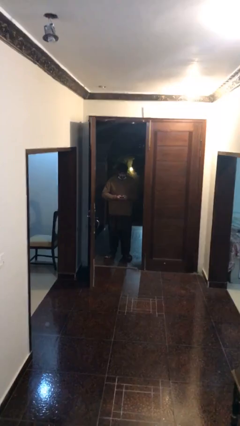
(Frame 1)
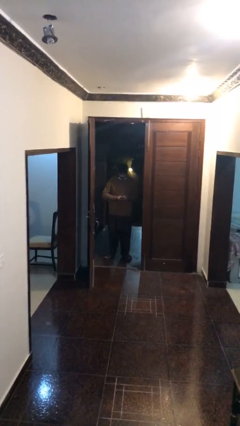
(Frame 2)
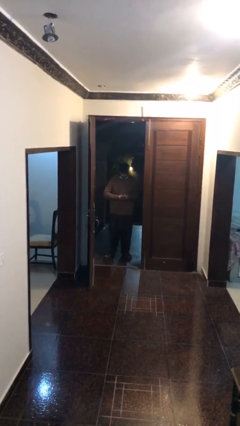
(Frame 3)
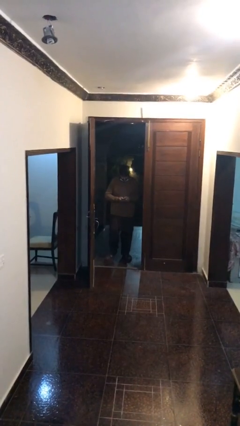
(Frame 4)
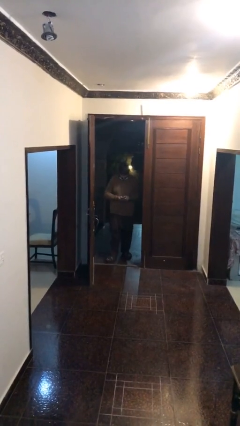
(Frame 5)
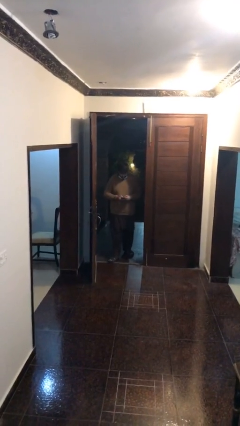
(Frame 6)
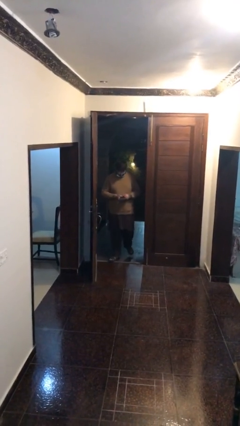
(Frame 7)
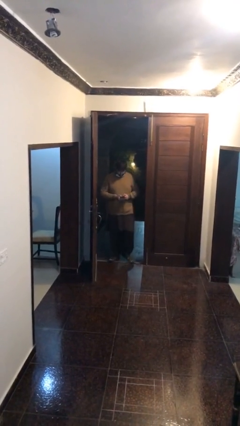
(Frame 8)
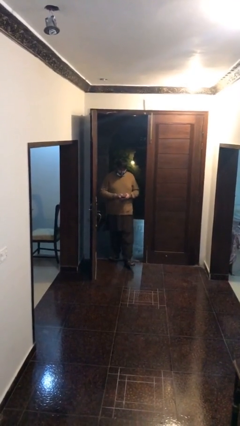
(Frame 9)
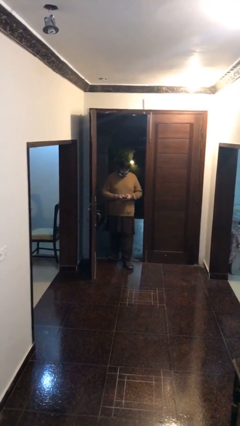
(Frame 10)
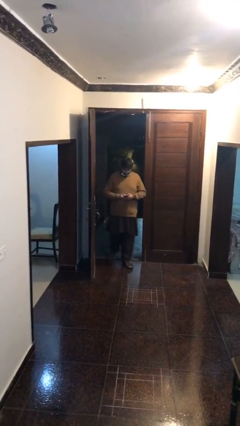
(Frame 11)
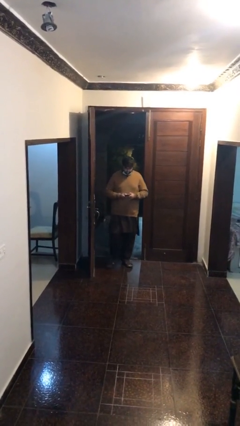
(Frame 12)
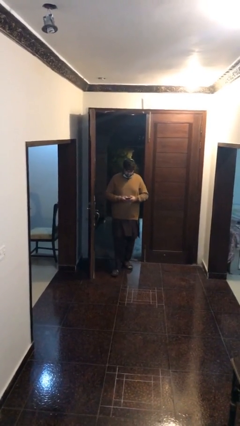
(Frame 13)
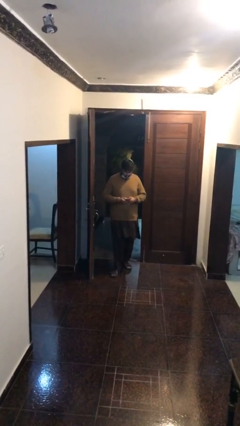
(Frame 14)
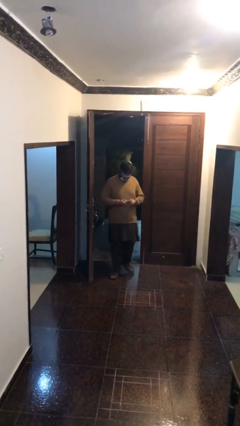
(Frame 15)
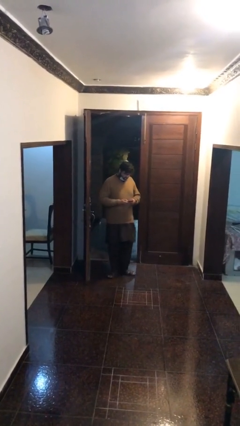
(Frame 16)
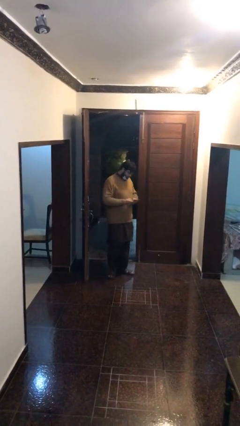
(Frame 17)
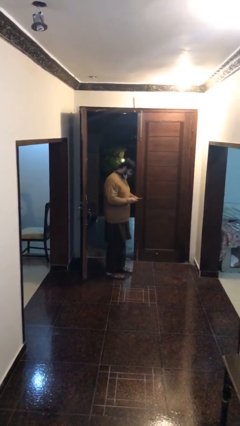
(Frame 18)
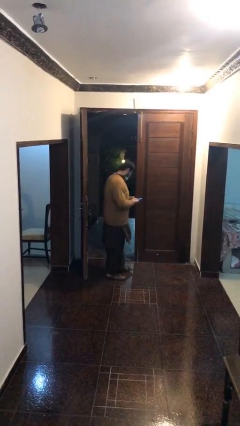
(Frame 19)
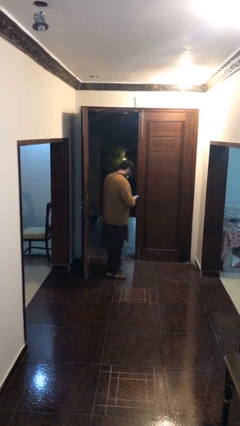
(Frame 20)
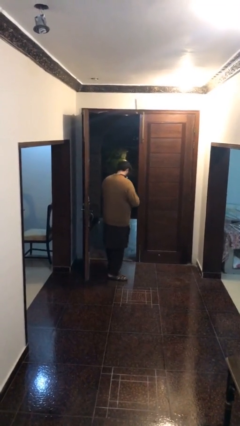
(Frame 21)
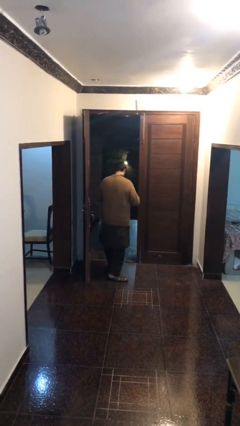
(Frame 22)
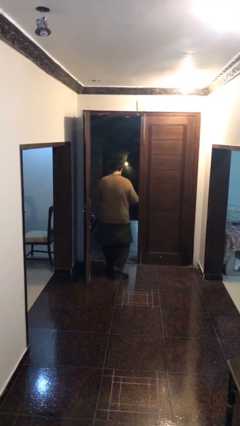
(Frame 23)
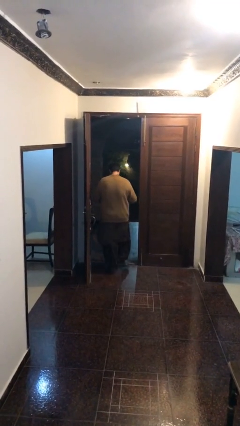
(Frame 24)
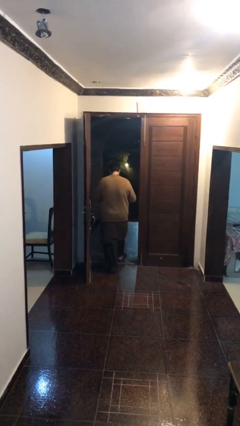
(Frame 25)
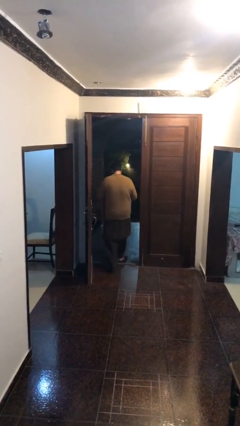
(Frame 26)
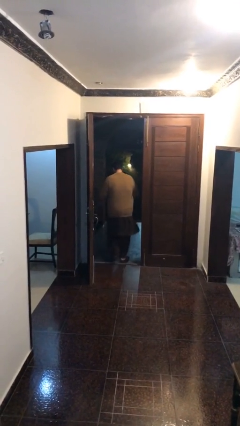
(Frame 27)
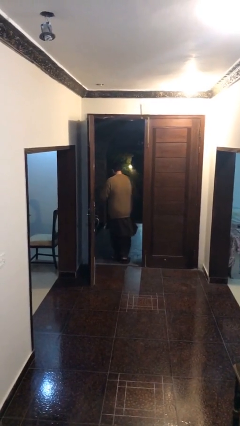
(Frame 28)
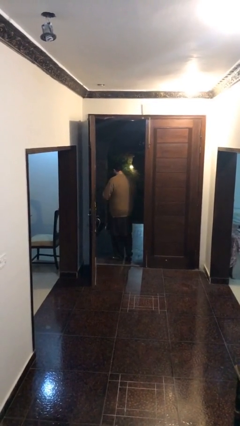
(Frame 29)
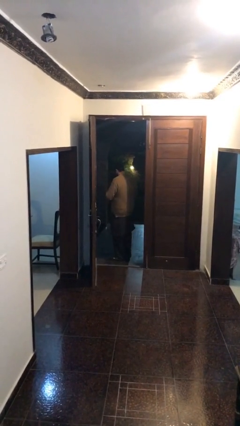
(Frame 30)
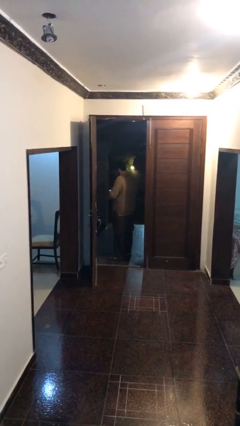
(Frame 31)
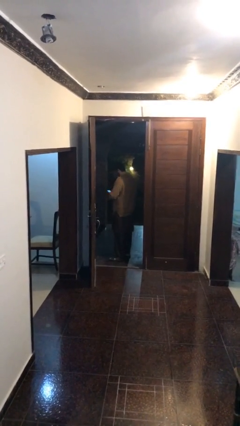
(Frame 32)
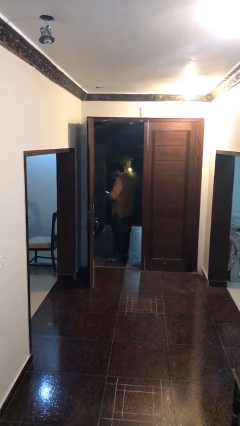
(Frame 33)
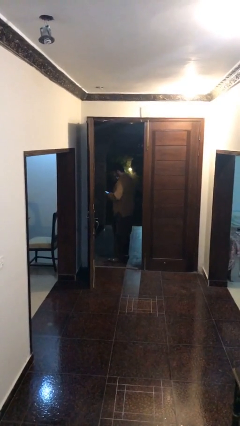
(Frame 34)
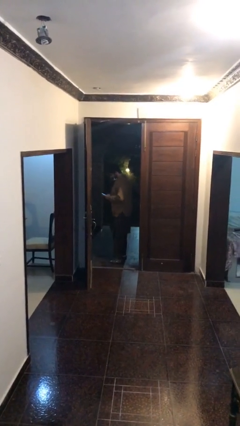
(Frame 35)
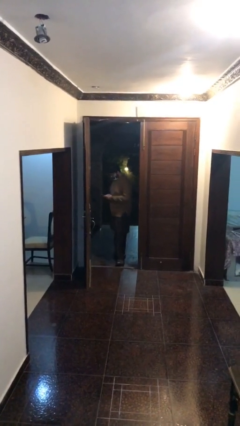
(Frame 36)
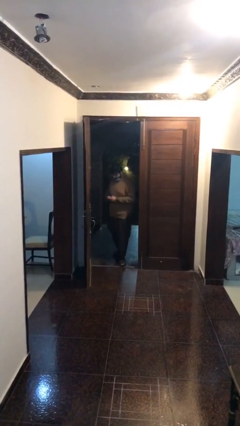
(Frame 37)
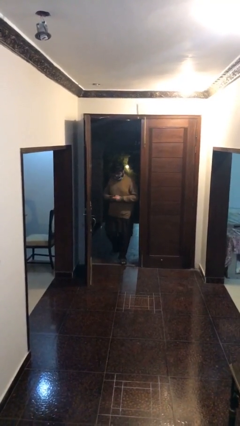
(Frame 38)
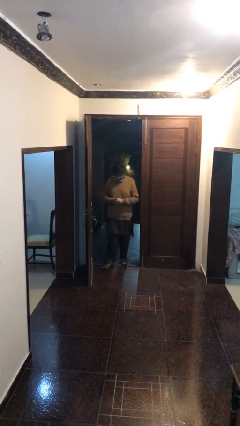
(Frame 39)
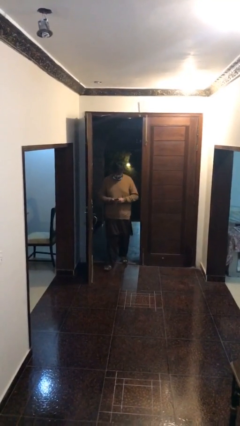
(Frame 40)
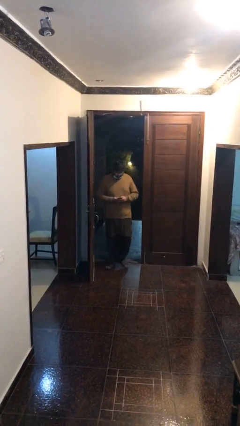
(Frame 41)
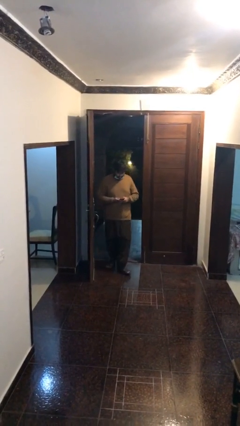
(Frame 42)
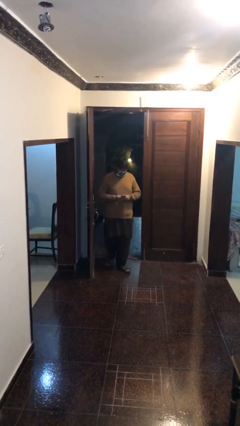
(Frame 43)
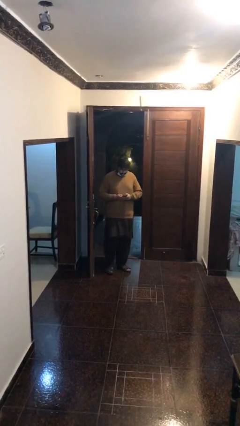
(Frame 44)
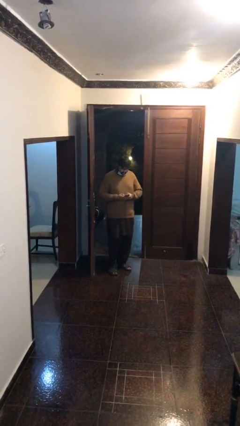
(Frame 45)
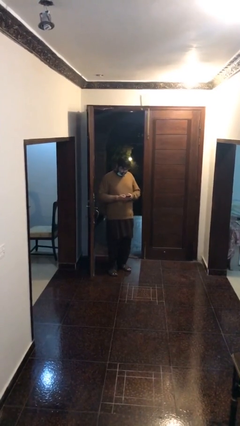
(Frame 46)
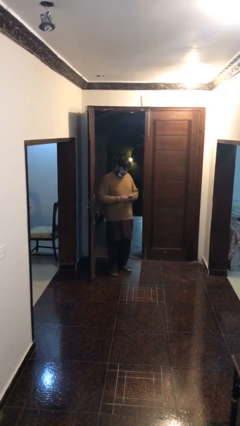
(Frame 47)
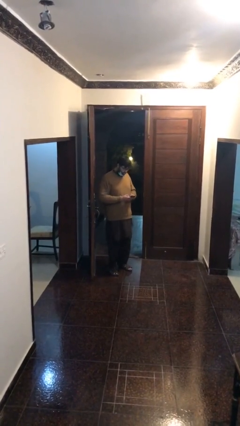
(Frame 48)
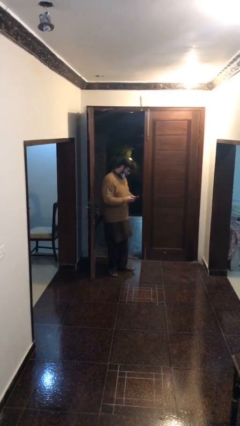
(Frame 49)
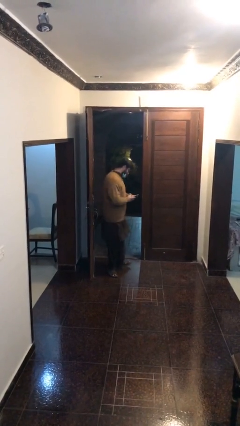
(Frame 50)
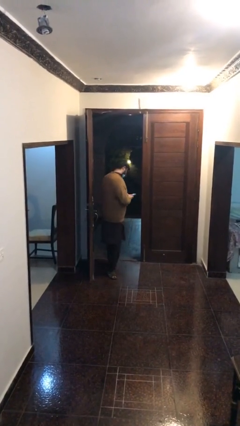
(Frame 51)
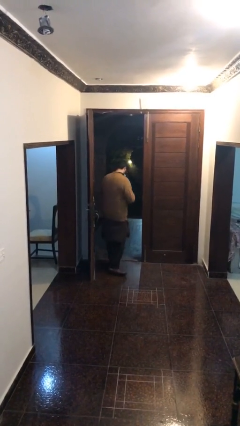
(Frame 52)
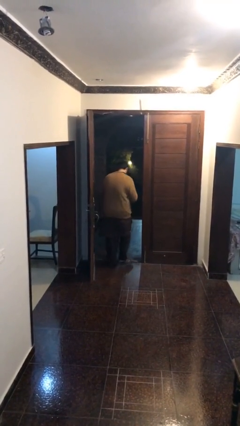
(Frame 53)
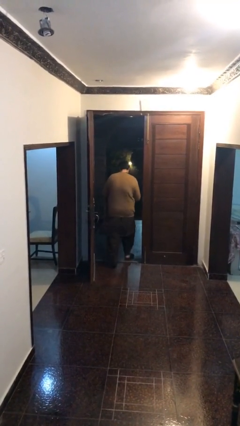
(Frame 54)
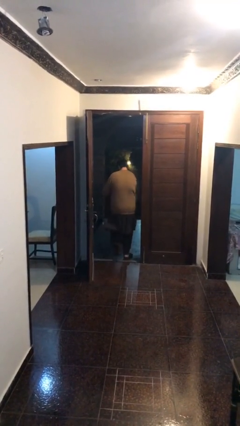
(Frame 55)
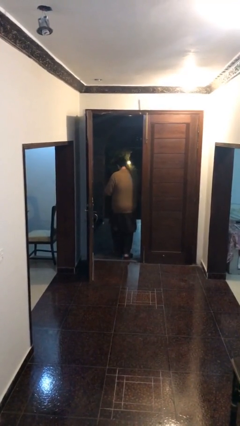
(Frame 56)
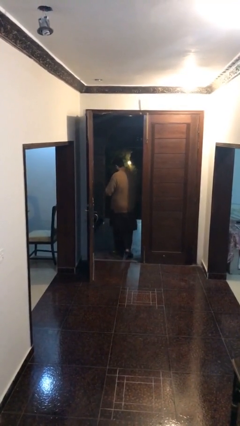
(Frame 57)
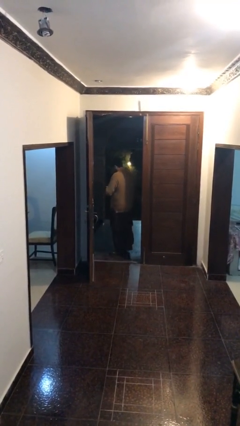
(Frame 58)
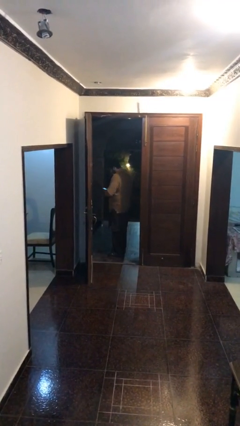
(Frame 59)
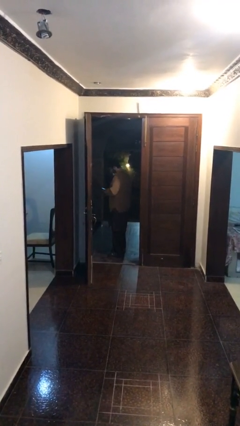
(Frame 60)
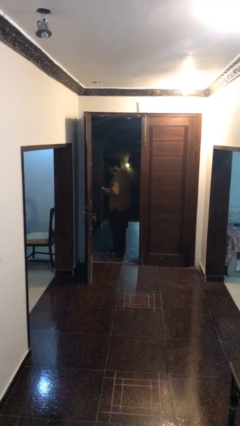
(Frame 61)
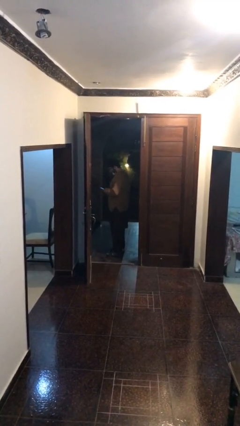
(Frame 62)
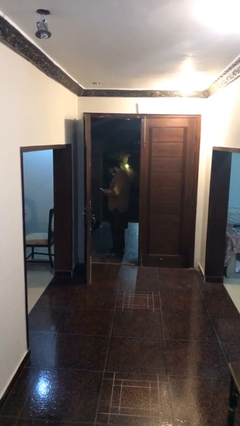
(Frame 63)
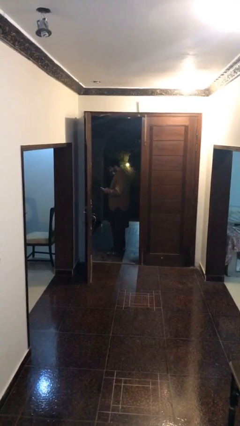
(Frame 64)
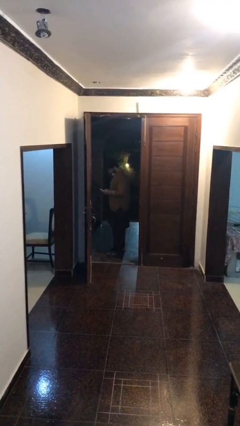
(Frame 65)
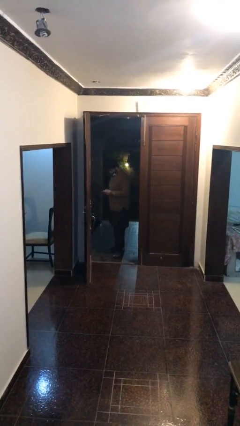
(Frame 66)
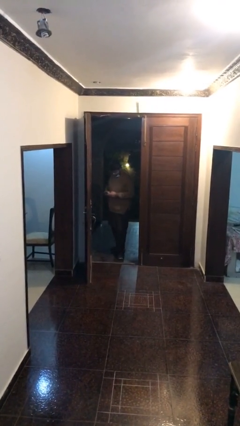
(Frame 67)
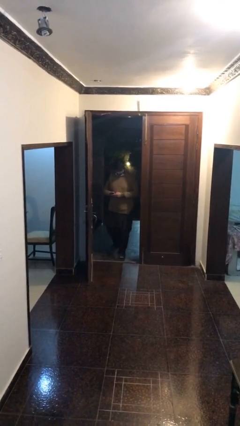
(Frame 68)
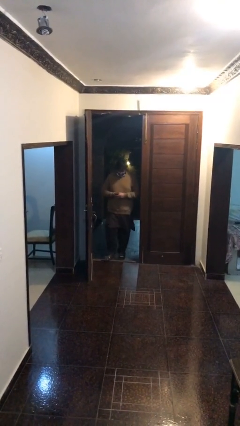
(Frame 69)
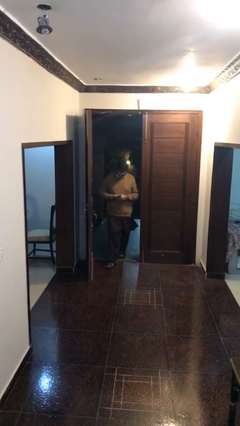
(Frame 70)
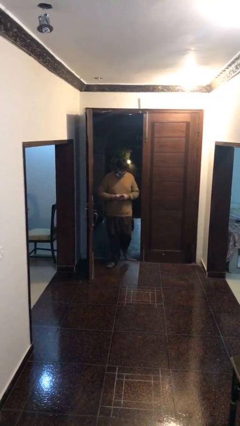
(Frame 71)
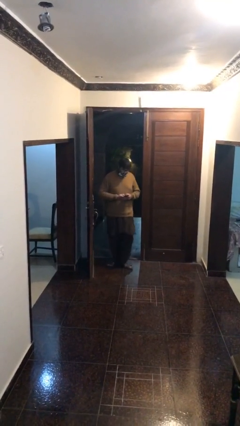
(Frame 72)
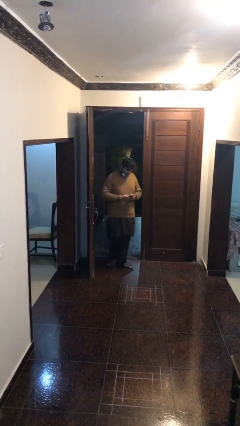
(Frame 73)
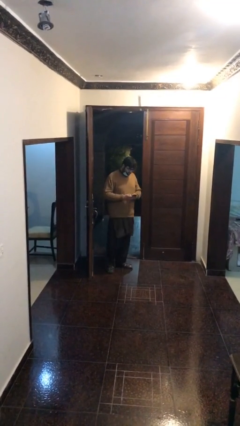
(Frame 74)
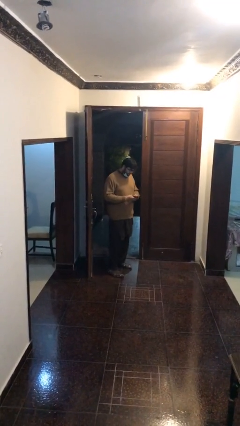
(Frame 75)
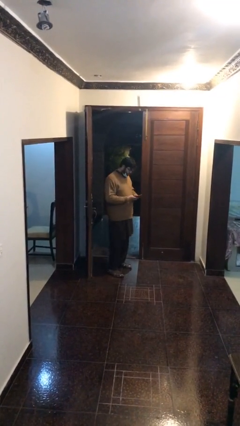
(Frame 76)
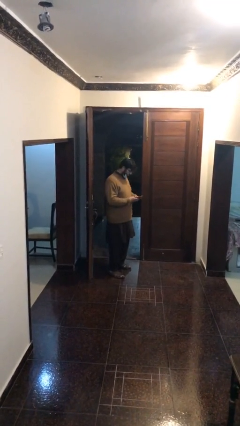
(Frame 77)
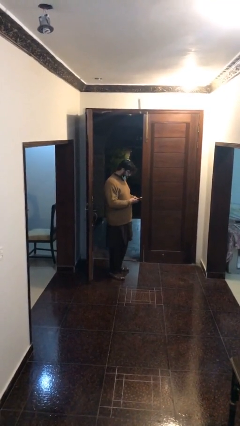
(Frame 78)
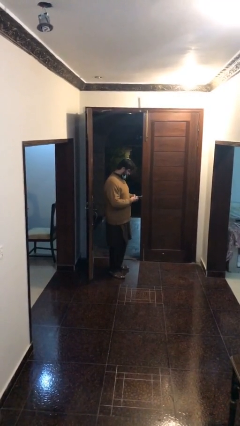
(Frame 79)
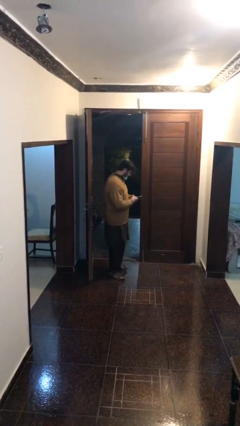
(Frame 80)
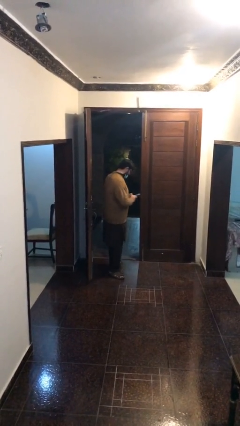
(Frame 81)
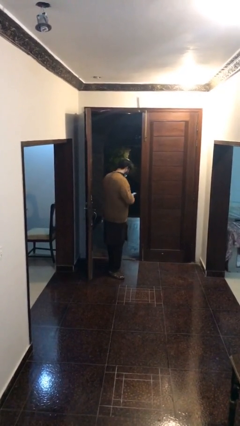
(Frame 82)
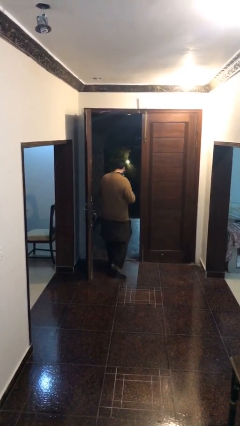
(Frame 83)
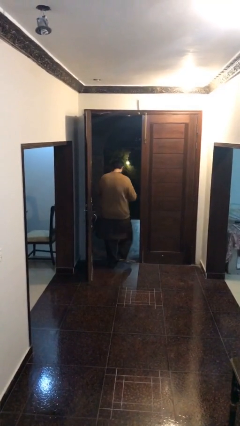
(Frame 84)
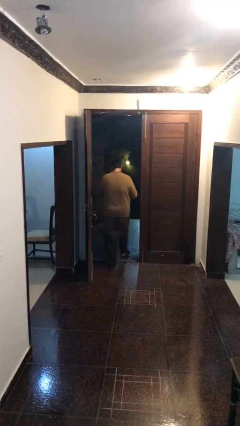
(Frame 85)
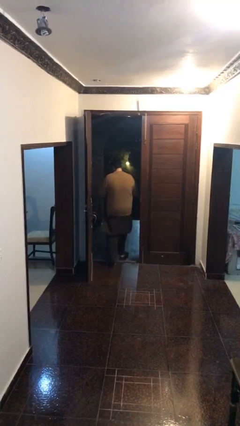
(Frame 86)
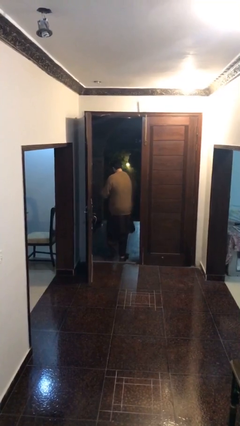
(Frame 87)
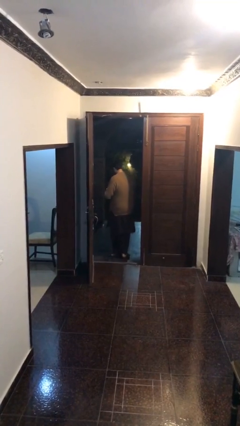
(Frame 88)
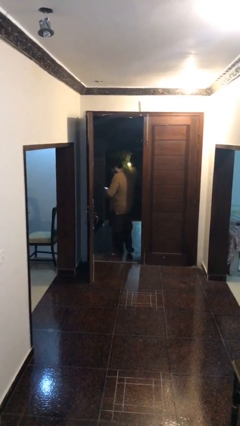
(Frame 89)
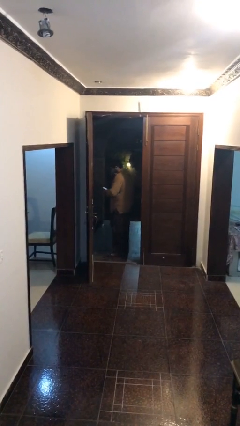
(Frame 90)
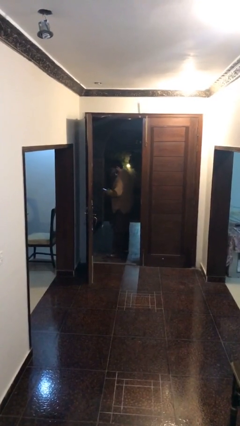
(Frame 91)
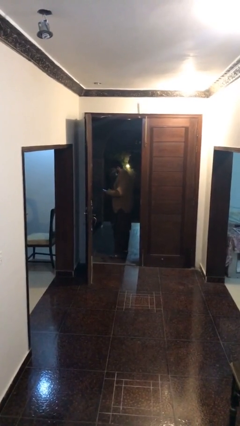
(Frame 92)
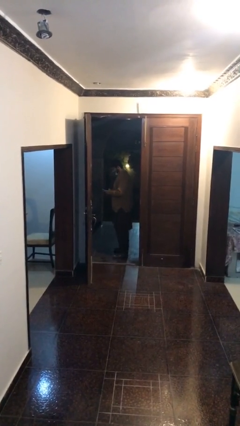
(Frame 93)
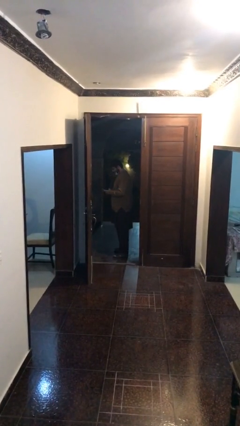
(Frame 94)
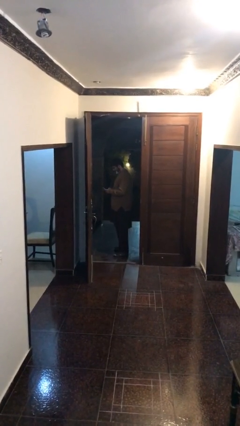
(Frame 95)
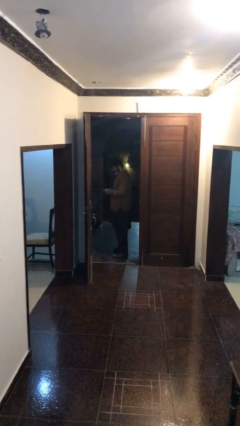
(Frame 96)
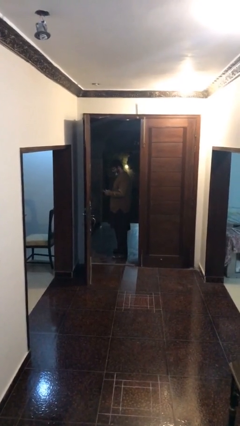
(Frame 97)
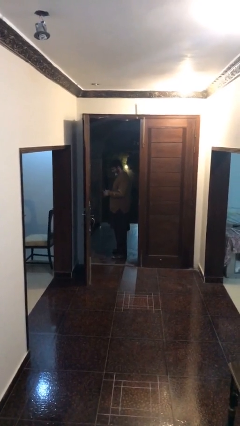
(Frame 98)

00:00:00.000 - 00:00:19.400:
person texts on phone
